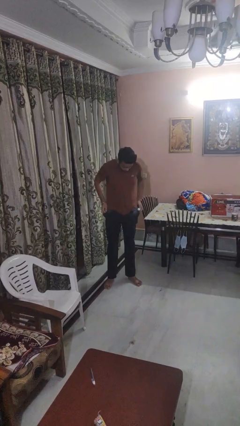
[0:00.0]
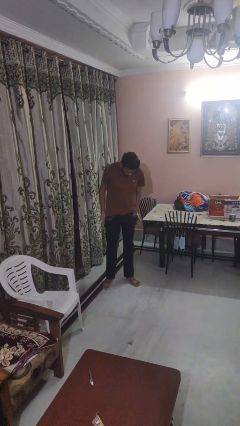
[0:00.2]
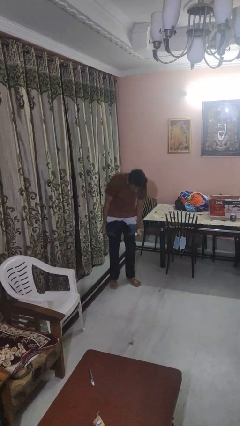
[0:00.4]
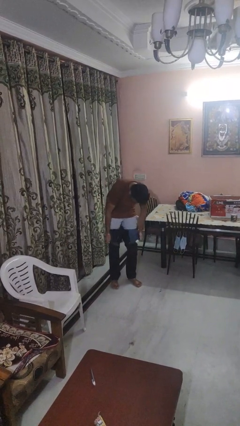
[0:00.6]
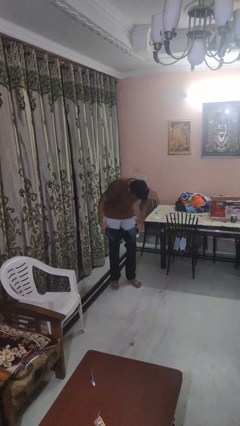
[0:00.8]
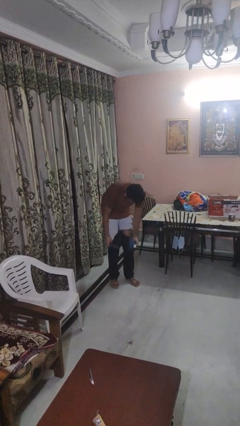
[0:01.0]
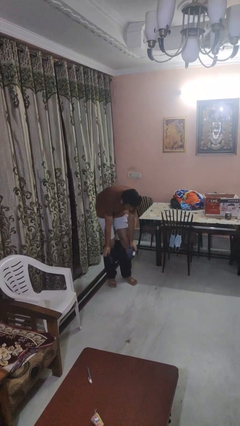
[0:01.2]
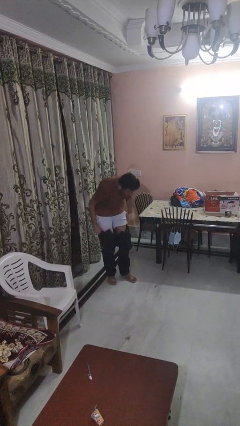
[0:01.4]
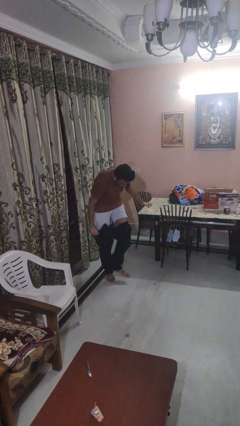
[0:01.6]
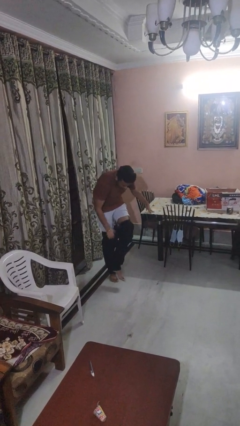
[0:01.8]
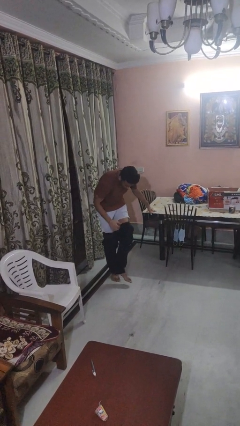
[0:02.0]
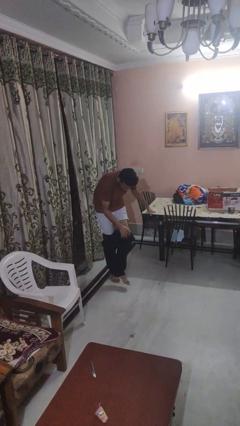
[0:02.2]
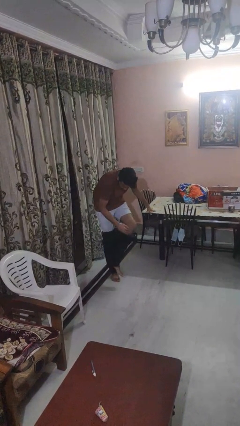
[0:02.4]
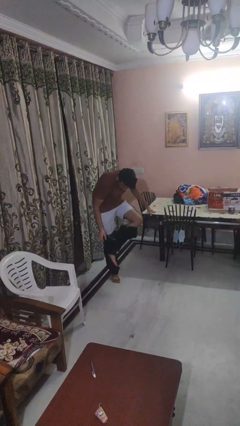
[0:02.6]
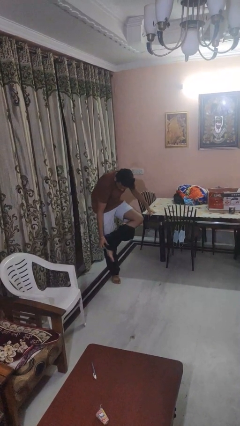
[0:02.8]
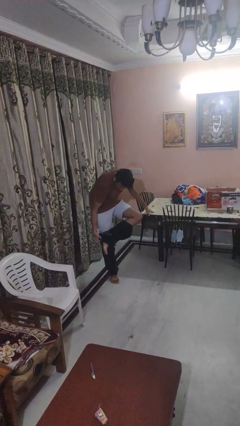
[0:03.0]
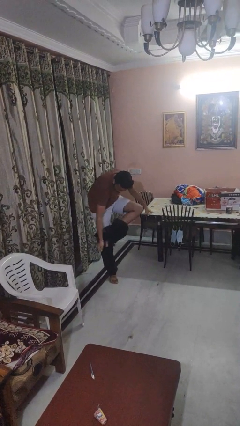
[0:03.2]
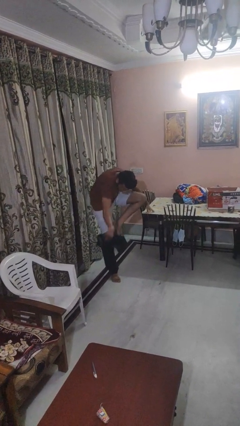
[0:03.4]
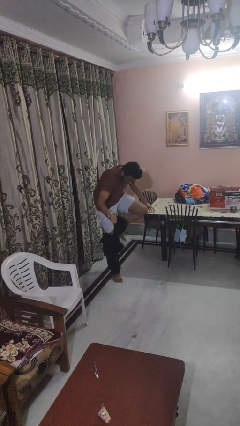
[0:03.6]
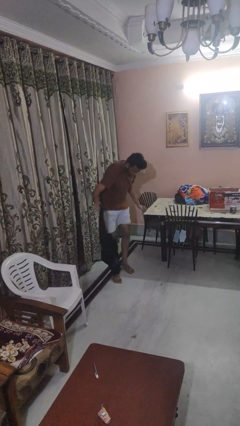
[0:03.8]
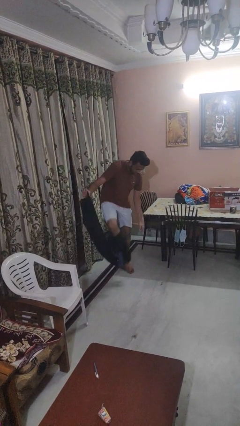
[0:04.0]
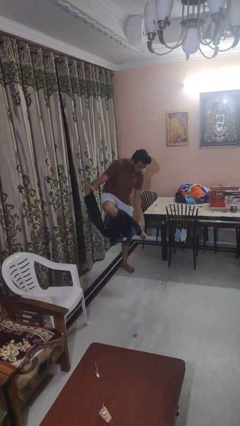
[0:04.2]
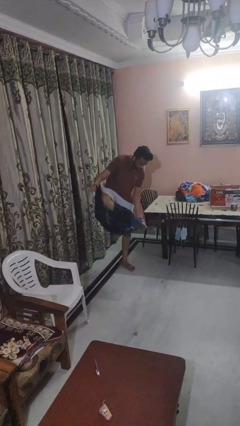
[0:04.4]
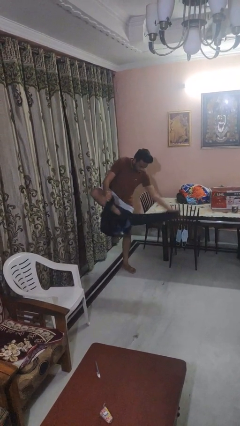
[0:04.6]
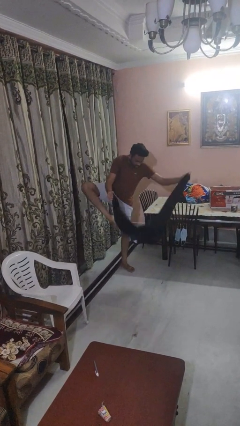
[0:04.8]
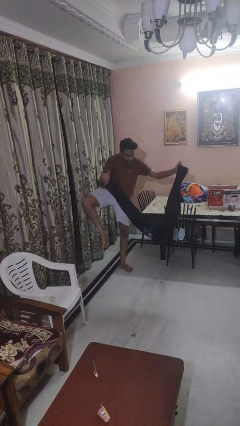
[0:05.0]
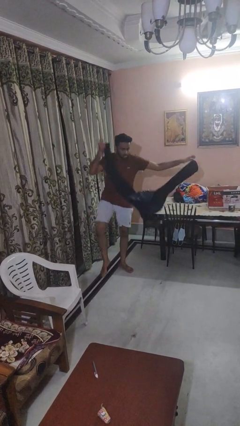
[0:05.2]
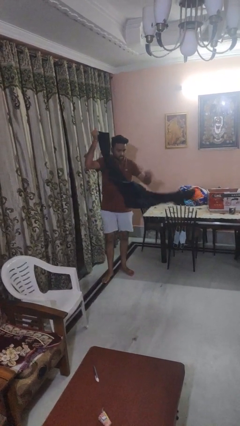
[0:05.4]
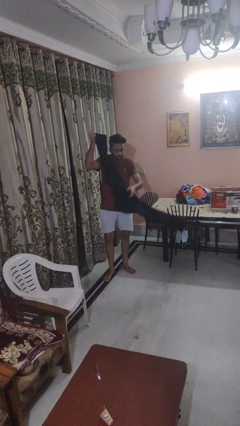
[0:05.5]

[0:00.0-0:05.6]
person takes off pants

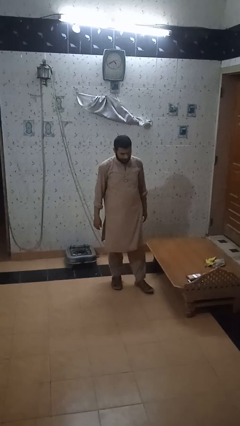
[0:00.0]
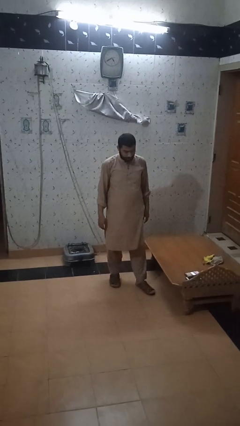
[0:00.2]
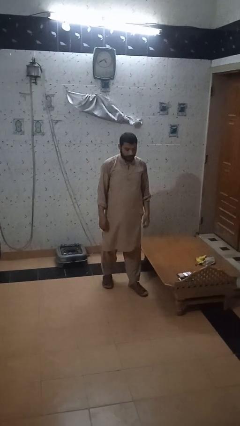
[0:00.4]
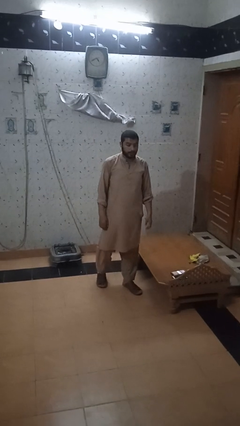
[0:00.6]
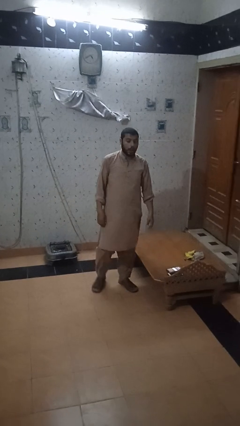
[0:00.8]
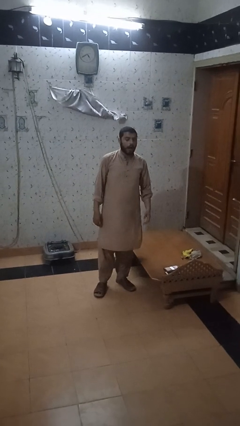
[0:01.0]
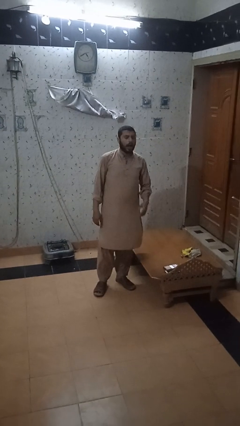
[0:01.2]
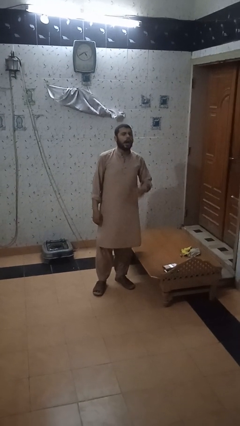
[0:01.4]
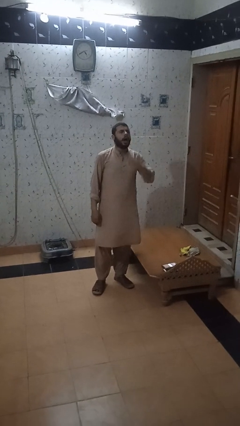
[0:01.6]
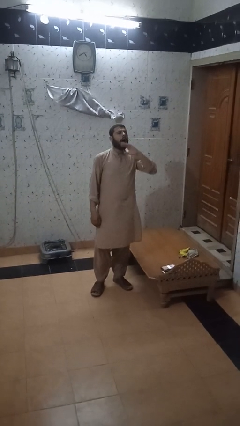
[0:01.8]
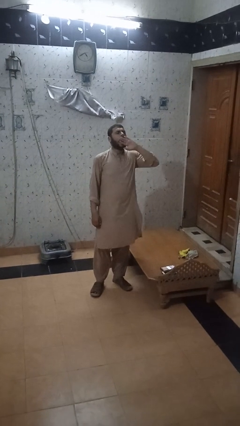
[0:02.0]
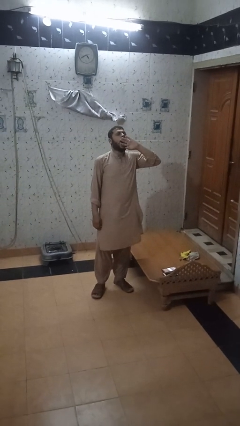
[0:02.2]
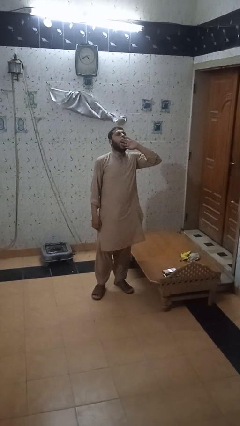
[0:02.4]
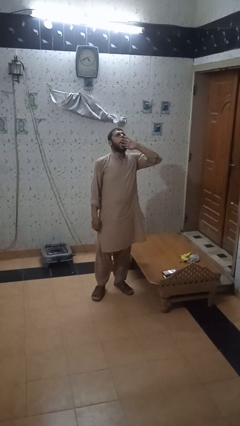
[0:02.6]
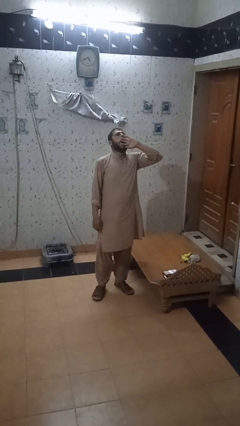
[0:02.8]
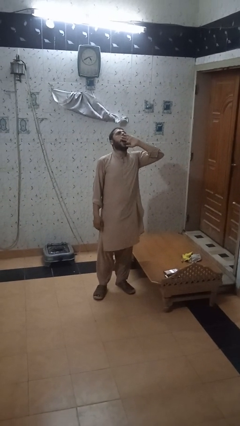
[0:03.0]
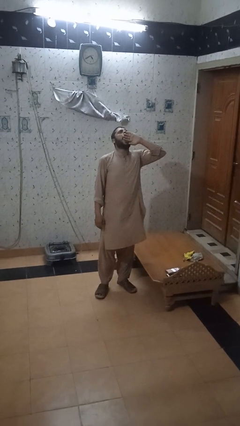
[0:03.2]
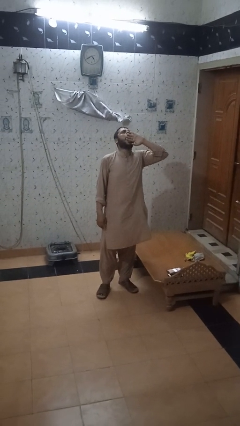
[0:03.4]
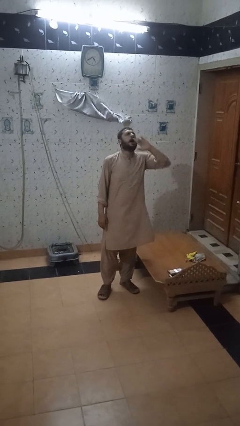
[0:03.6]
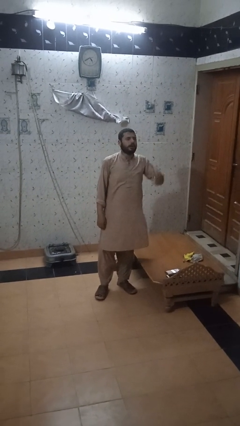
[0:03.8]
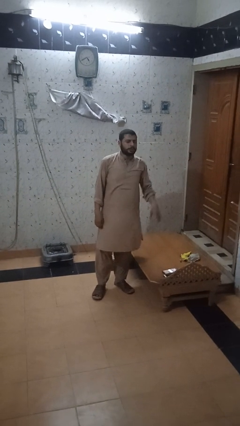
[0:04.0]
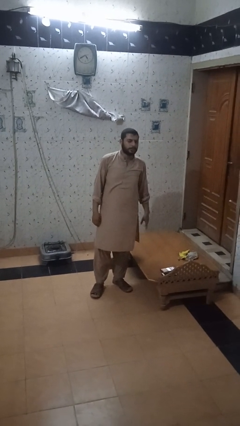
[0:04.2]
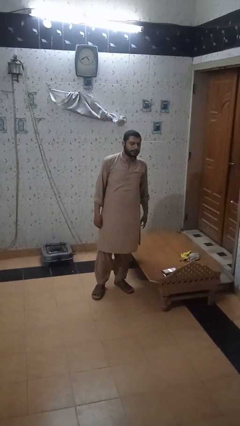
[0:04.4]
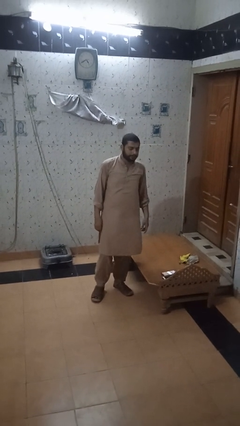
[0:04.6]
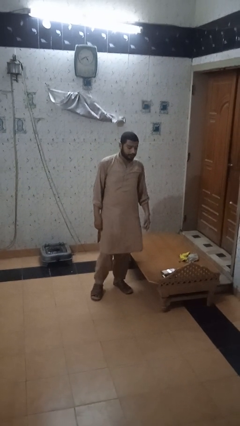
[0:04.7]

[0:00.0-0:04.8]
person yawns

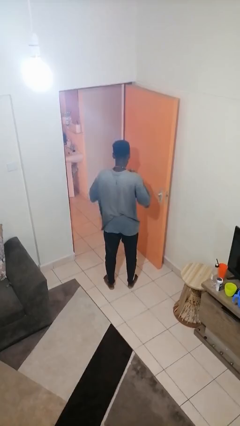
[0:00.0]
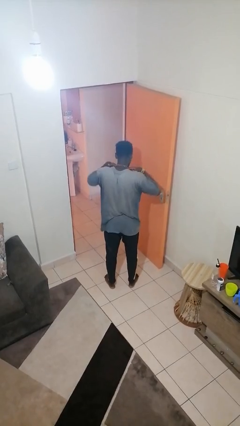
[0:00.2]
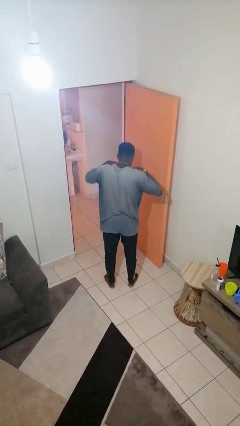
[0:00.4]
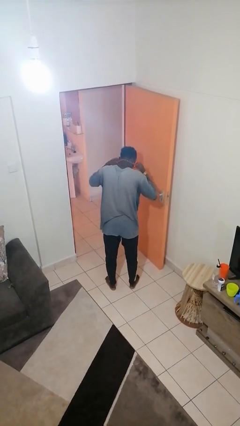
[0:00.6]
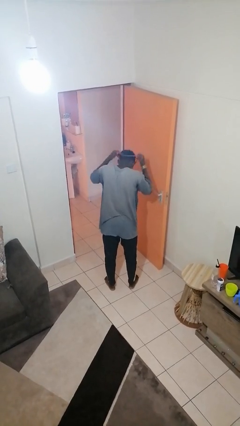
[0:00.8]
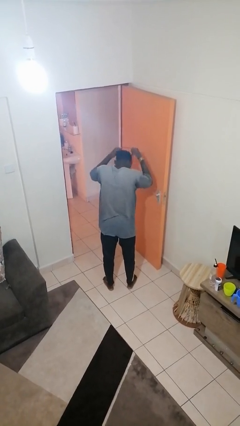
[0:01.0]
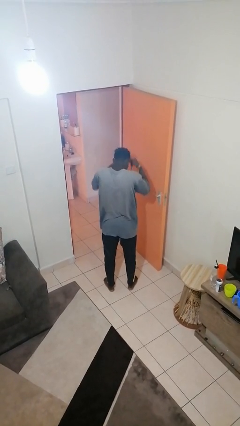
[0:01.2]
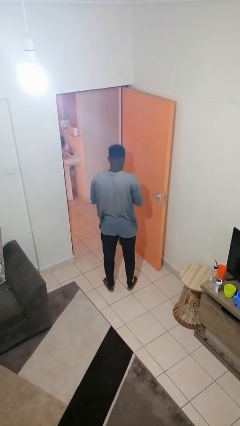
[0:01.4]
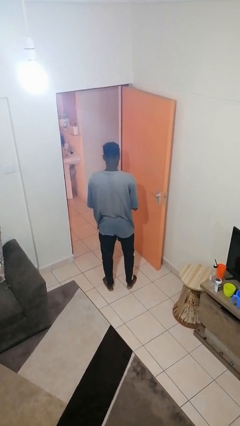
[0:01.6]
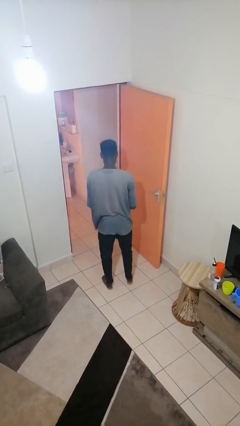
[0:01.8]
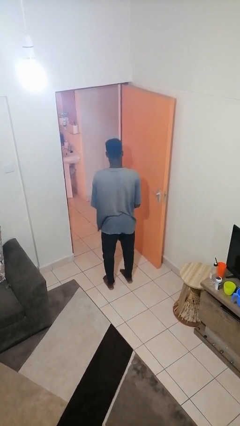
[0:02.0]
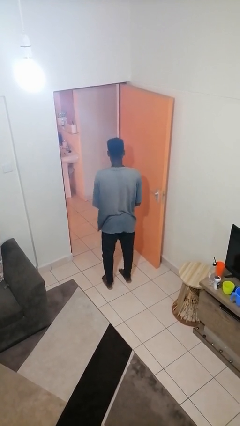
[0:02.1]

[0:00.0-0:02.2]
person takes off necklace

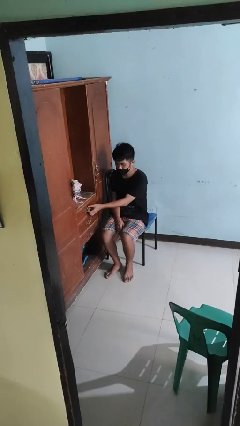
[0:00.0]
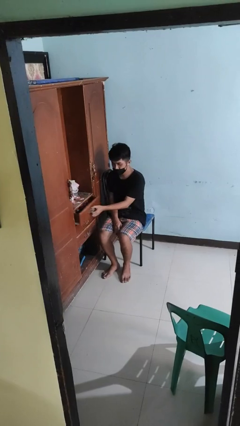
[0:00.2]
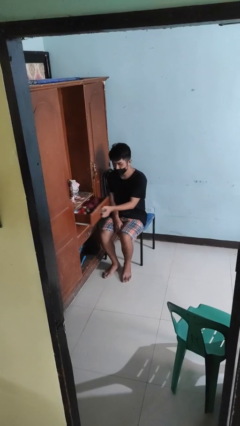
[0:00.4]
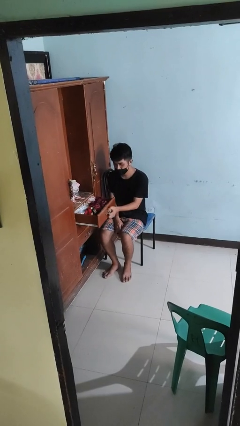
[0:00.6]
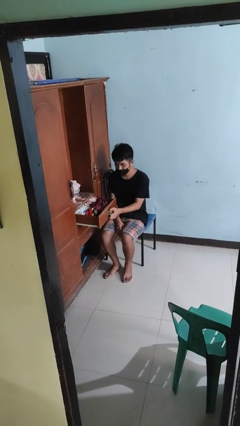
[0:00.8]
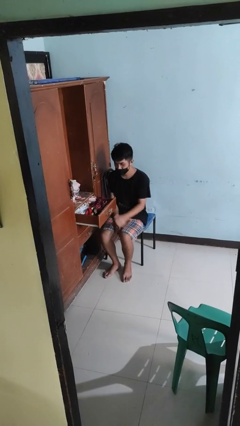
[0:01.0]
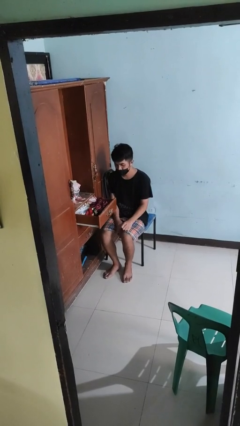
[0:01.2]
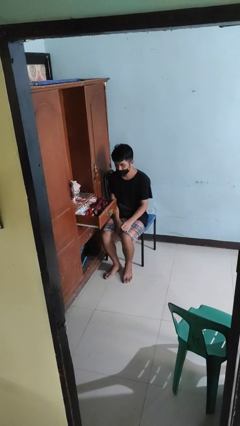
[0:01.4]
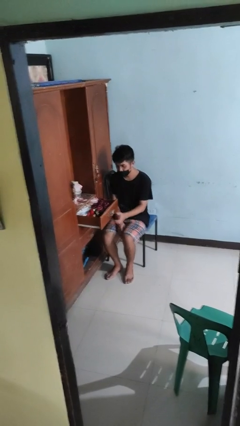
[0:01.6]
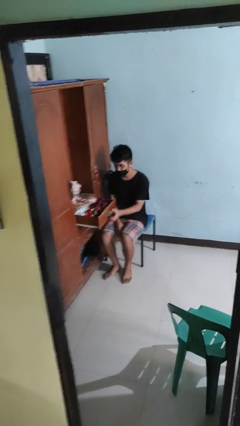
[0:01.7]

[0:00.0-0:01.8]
person opens dresser drawer

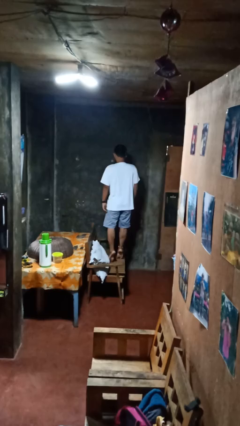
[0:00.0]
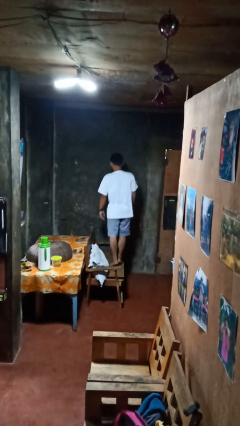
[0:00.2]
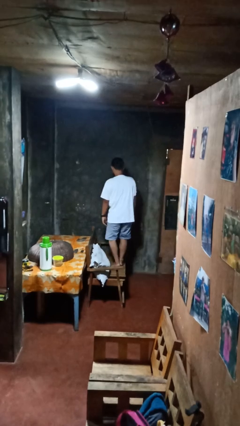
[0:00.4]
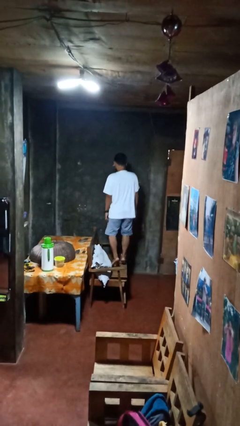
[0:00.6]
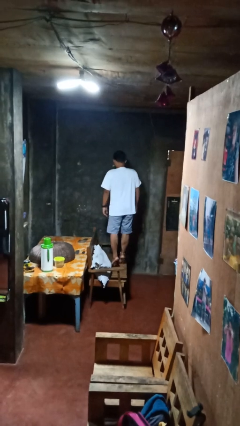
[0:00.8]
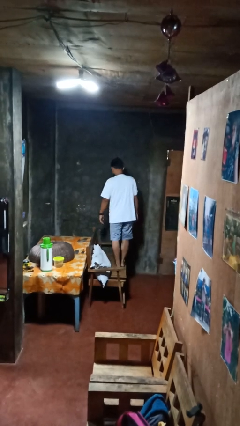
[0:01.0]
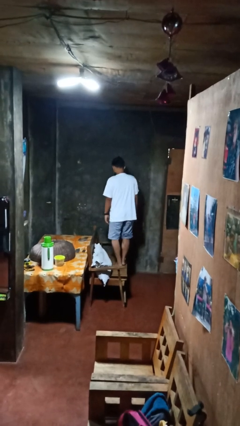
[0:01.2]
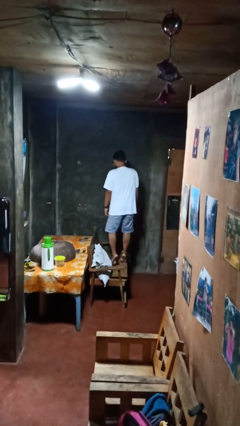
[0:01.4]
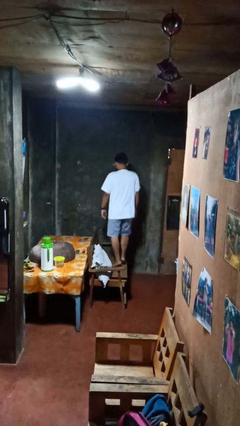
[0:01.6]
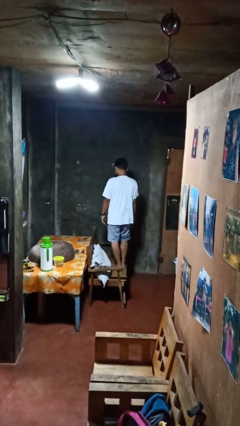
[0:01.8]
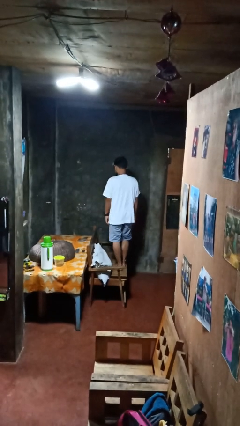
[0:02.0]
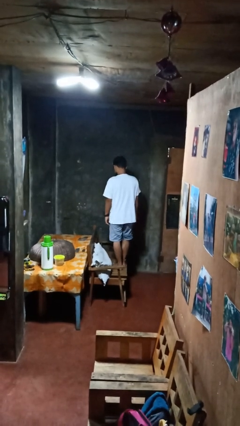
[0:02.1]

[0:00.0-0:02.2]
person jumps on couch

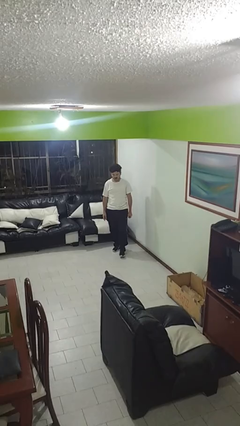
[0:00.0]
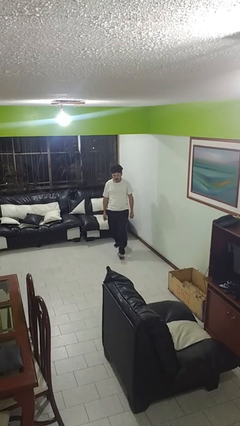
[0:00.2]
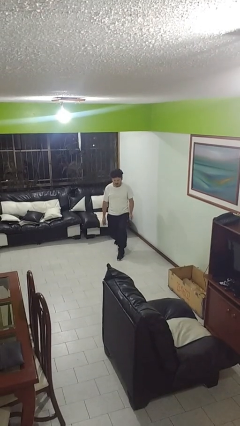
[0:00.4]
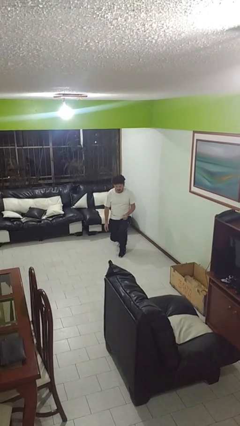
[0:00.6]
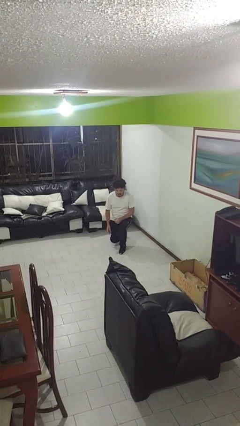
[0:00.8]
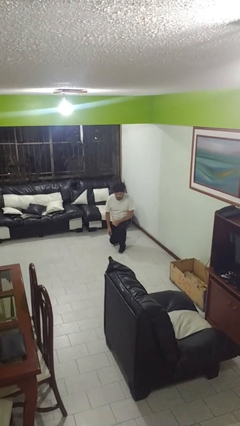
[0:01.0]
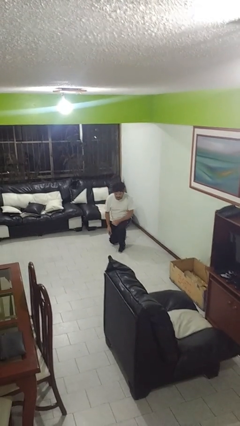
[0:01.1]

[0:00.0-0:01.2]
person kneels
